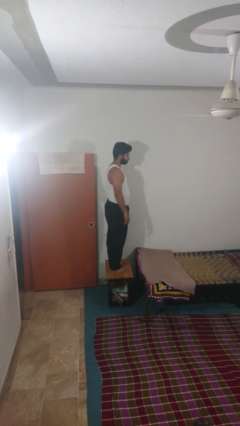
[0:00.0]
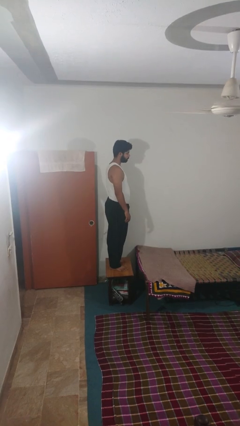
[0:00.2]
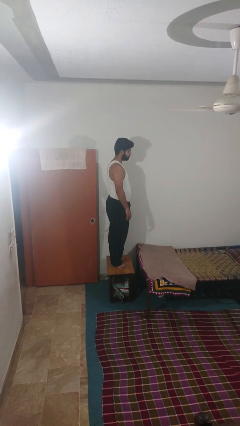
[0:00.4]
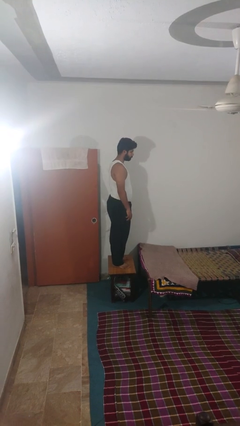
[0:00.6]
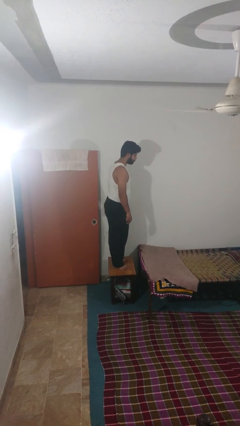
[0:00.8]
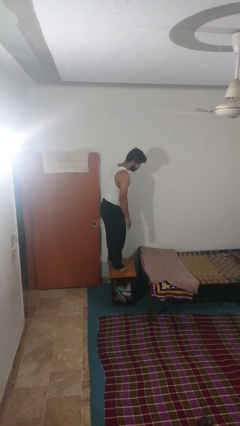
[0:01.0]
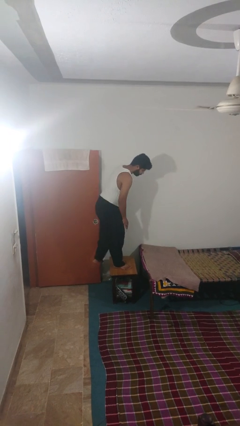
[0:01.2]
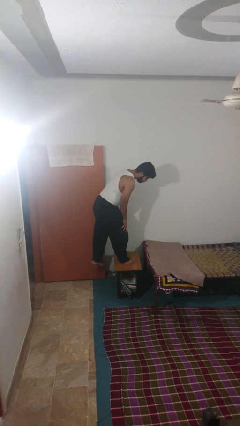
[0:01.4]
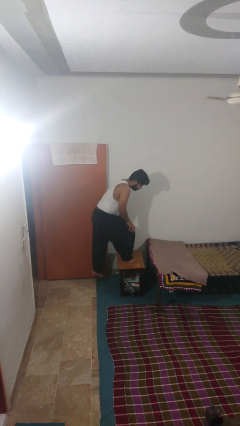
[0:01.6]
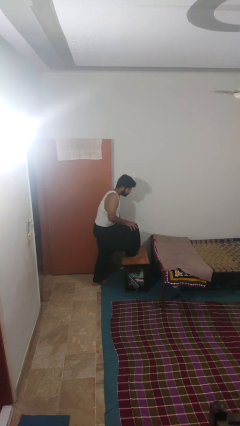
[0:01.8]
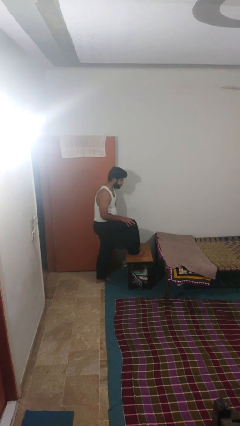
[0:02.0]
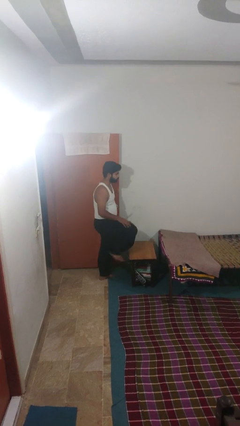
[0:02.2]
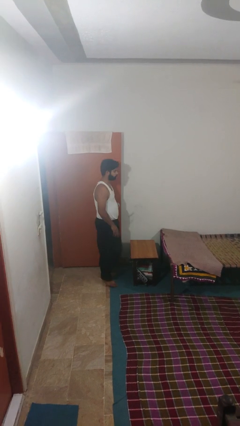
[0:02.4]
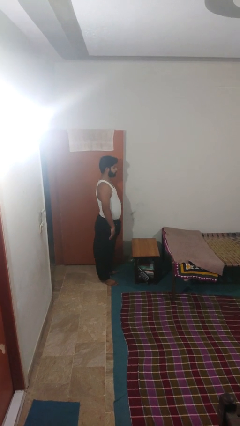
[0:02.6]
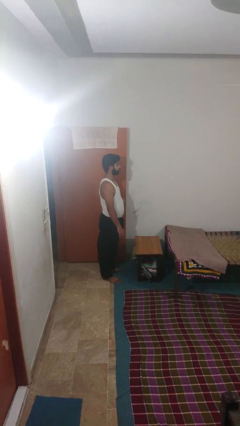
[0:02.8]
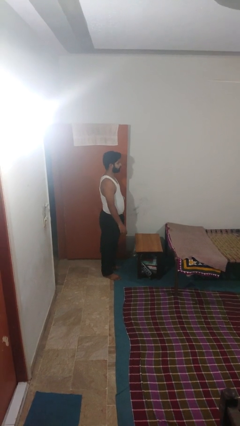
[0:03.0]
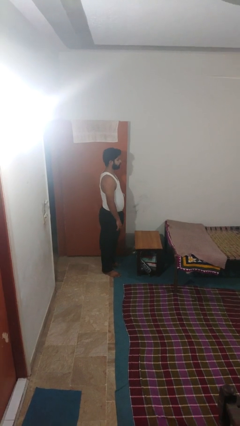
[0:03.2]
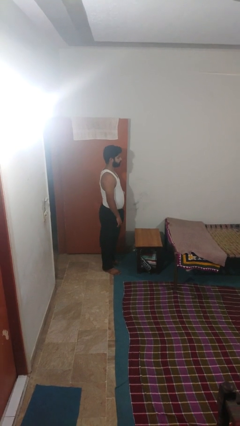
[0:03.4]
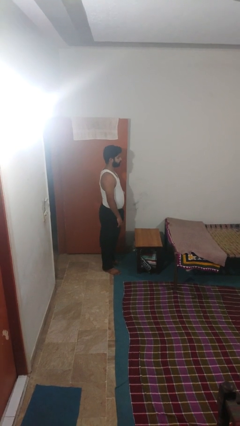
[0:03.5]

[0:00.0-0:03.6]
person climbs off table

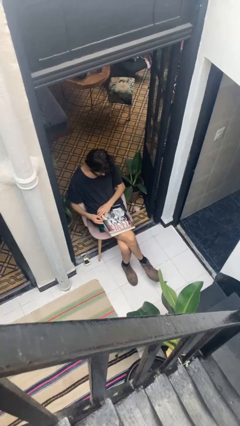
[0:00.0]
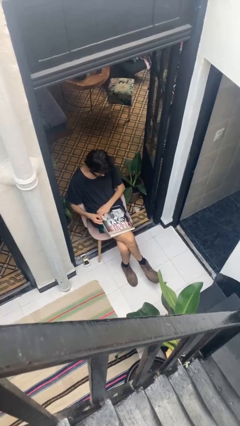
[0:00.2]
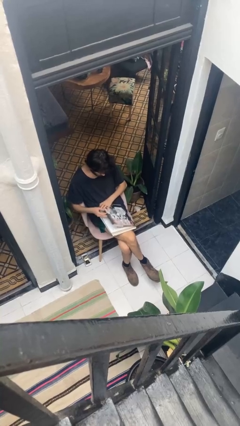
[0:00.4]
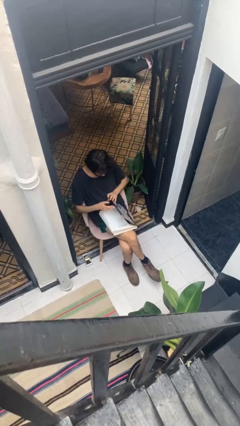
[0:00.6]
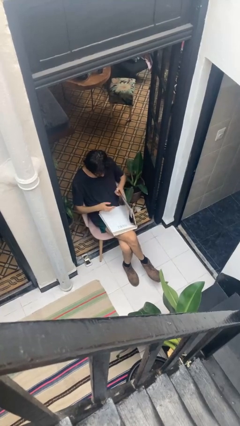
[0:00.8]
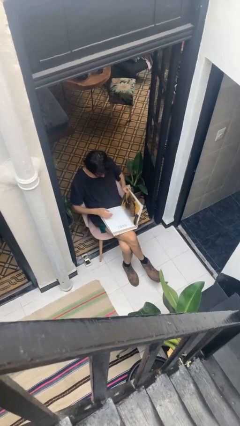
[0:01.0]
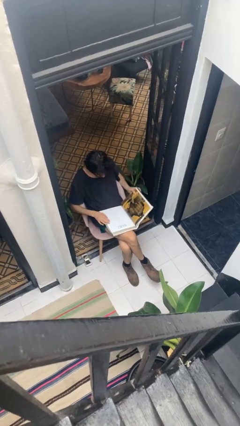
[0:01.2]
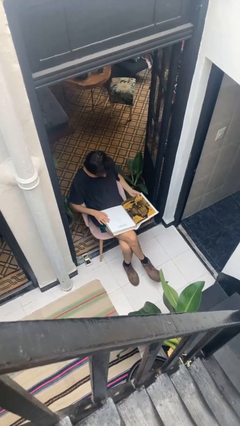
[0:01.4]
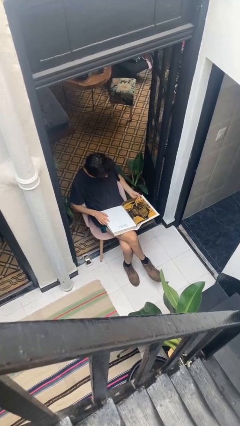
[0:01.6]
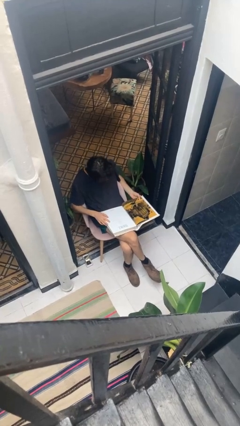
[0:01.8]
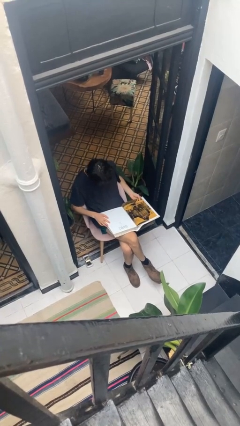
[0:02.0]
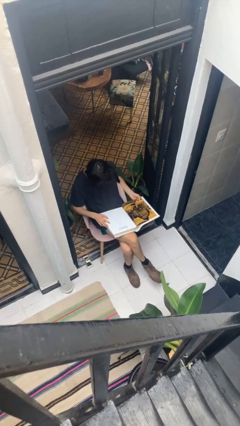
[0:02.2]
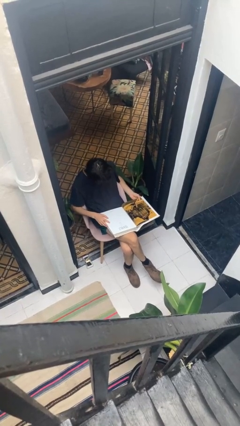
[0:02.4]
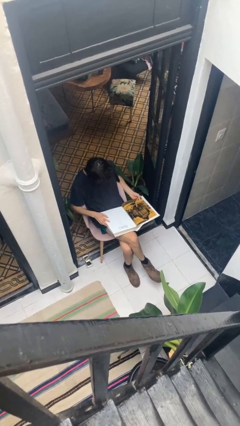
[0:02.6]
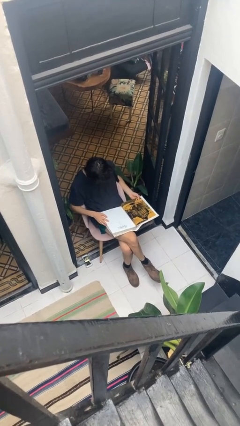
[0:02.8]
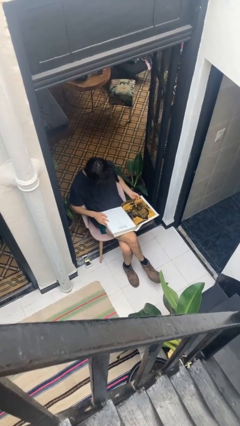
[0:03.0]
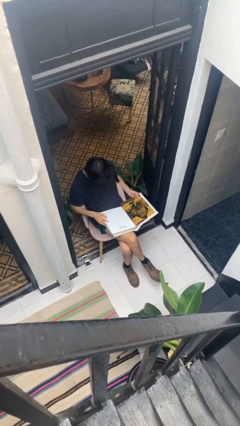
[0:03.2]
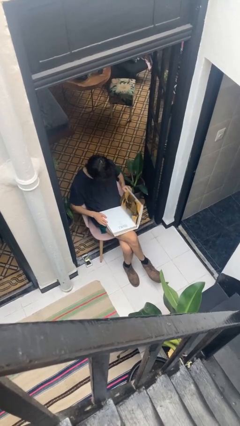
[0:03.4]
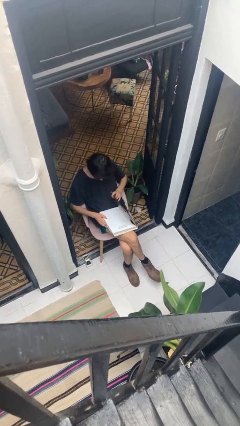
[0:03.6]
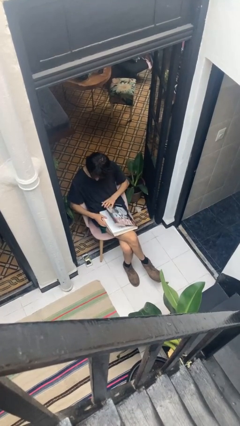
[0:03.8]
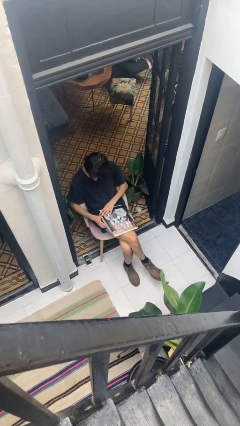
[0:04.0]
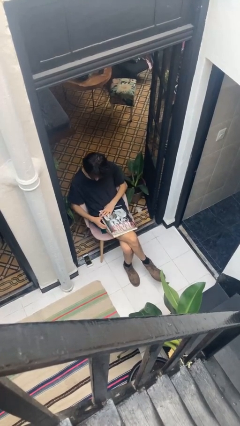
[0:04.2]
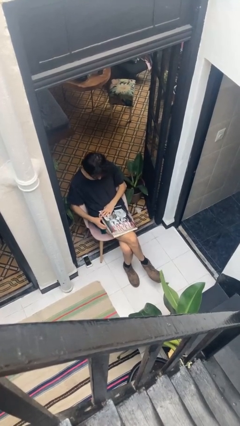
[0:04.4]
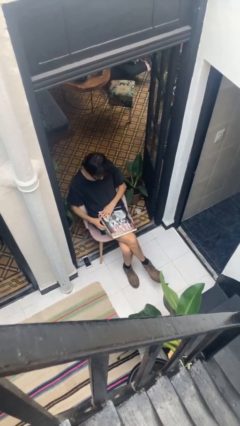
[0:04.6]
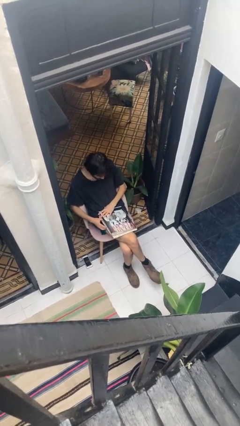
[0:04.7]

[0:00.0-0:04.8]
person reads document

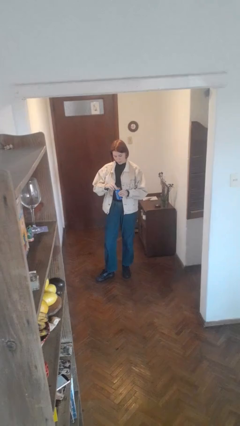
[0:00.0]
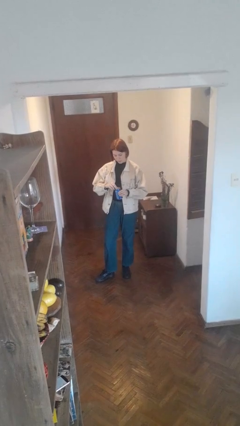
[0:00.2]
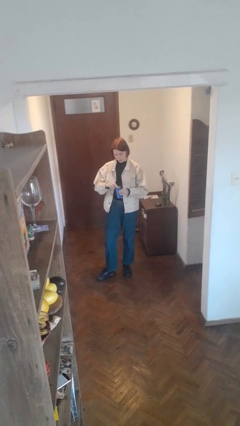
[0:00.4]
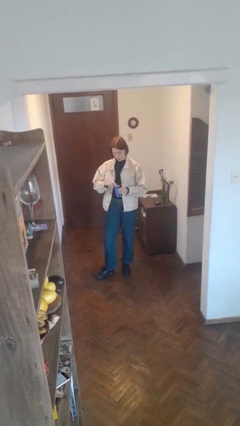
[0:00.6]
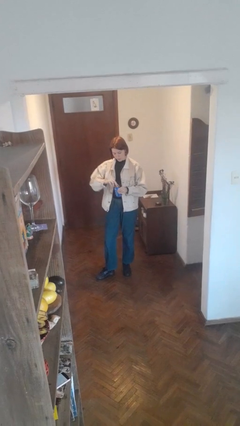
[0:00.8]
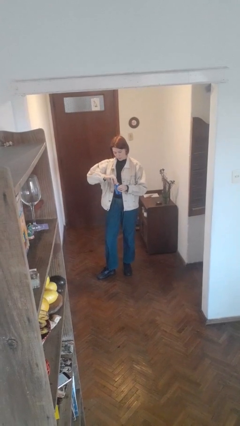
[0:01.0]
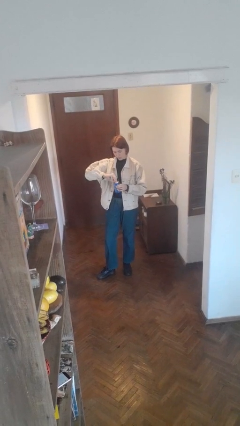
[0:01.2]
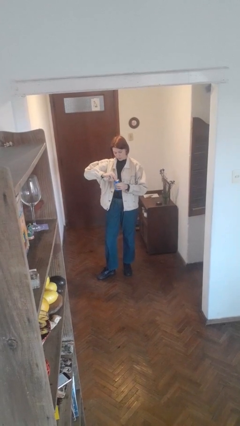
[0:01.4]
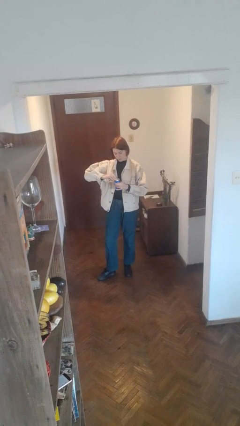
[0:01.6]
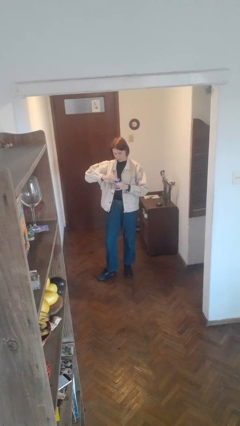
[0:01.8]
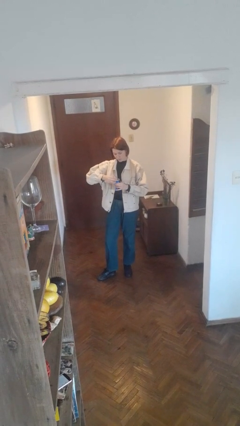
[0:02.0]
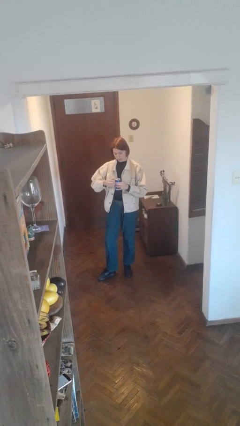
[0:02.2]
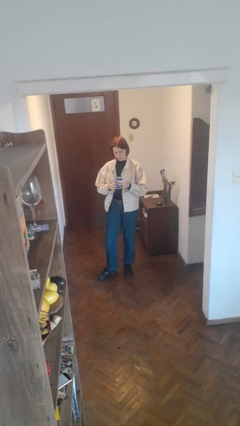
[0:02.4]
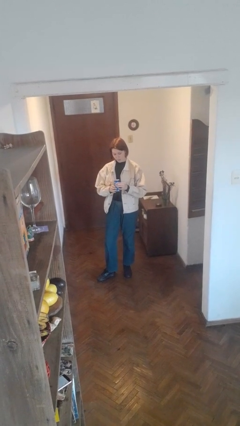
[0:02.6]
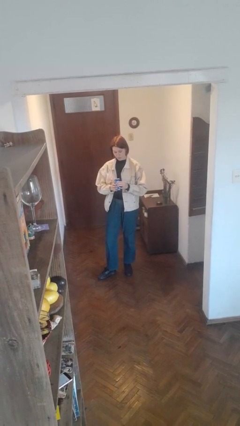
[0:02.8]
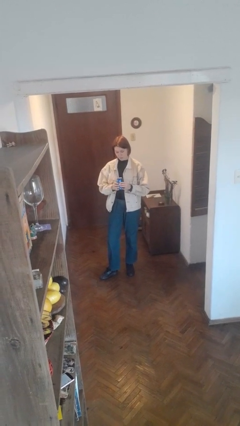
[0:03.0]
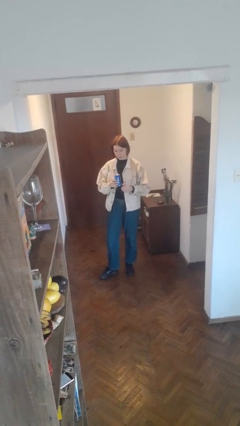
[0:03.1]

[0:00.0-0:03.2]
person opens beverage can

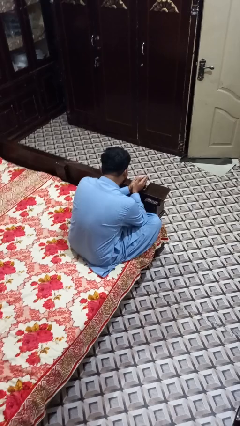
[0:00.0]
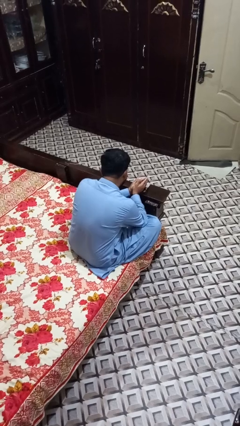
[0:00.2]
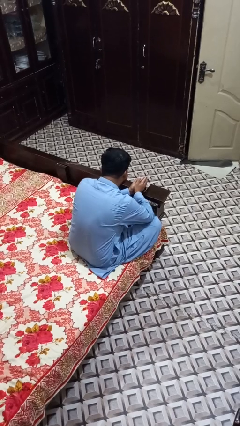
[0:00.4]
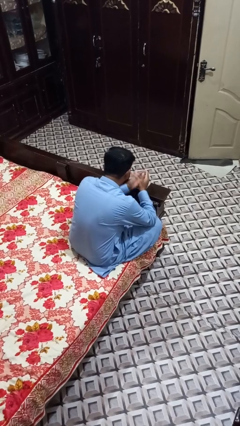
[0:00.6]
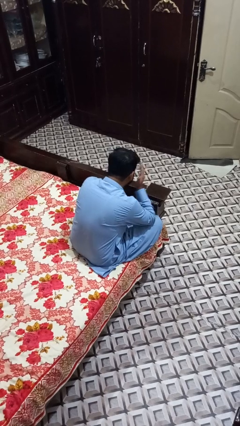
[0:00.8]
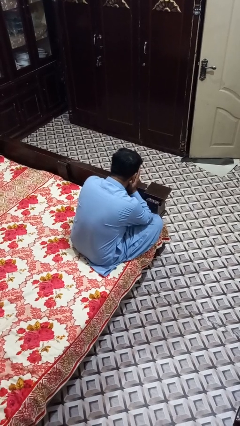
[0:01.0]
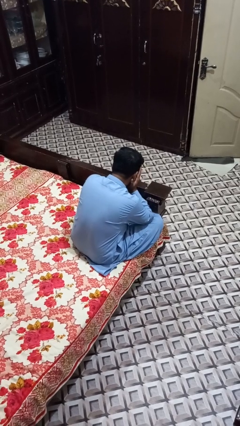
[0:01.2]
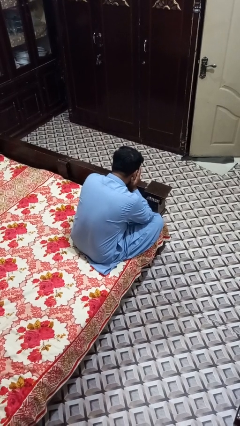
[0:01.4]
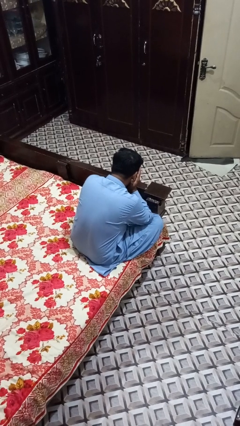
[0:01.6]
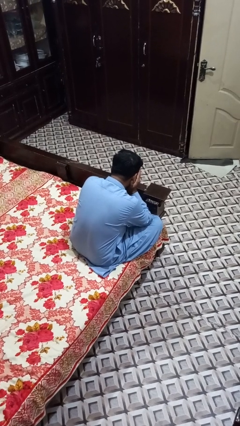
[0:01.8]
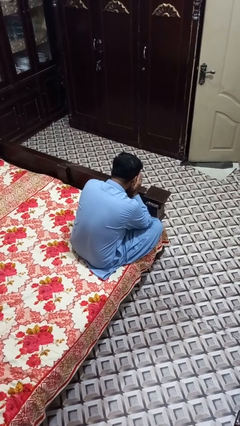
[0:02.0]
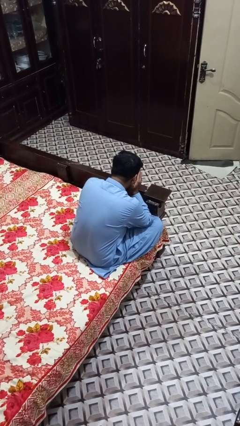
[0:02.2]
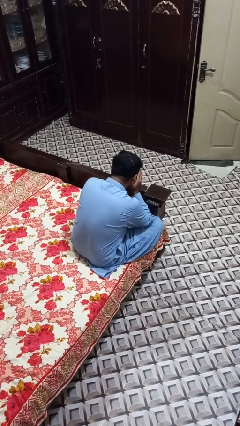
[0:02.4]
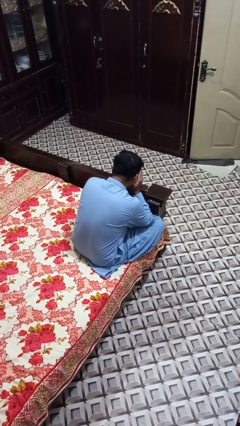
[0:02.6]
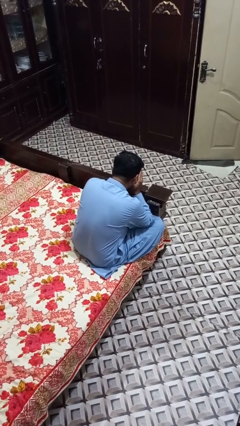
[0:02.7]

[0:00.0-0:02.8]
person covers face with hands

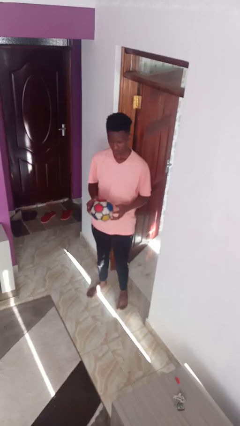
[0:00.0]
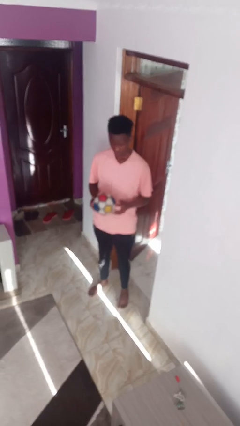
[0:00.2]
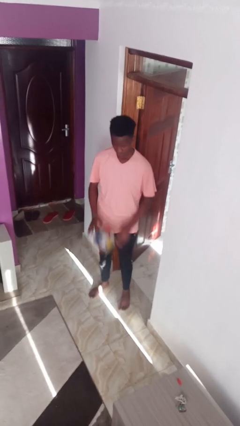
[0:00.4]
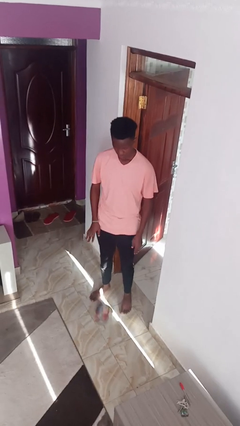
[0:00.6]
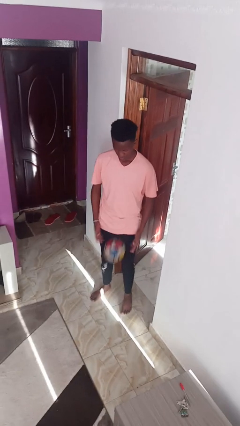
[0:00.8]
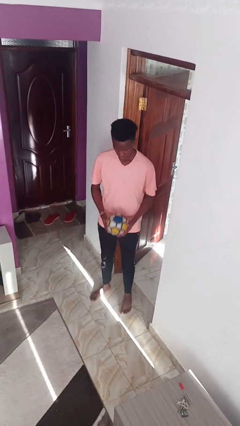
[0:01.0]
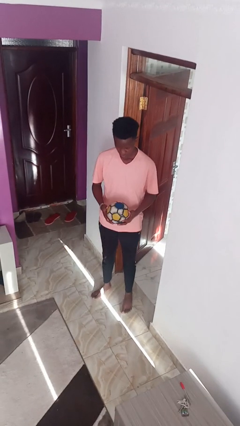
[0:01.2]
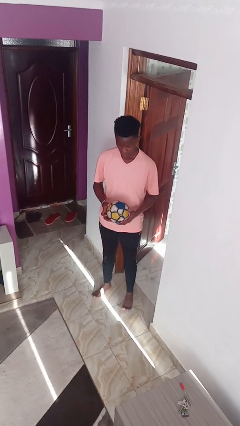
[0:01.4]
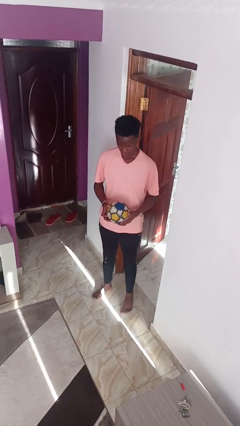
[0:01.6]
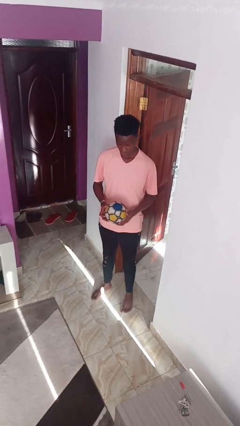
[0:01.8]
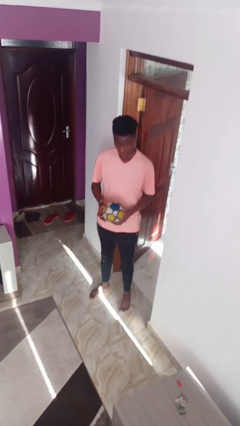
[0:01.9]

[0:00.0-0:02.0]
person bounces ball on floor

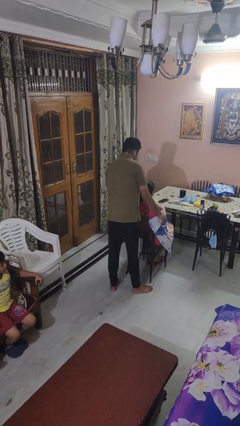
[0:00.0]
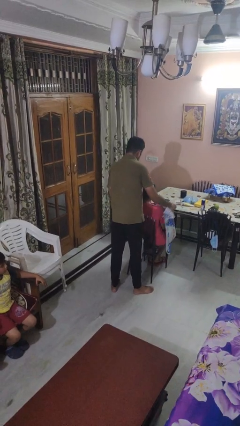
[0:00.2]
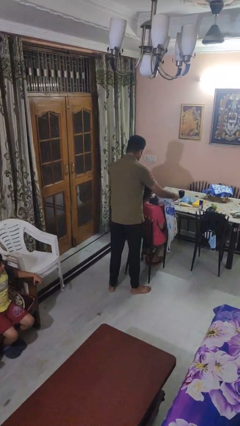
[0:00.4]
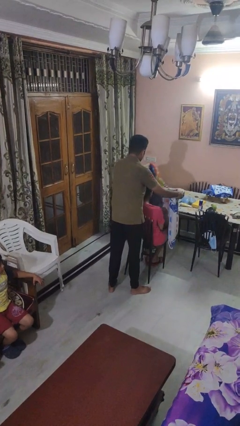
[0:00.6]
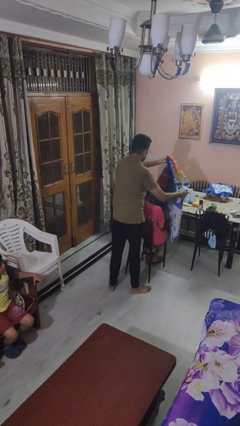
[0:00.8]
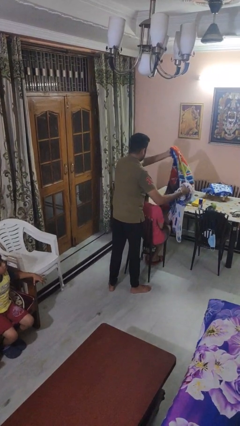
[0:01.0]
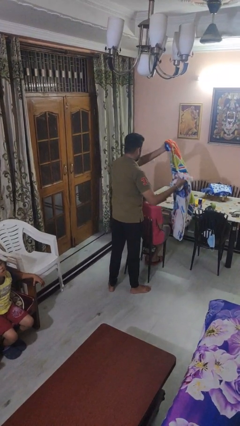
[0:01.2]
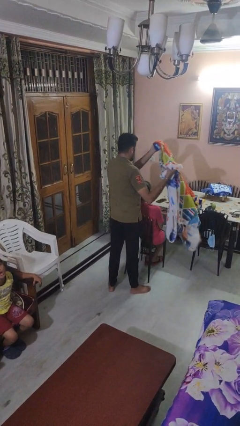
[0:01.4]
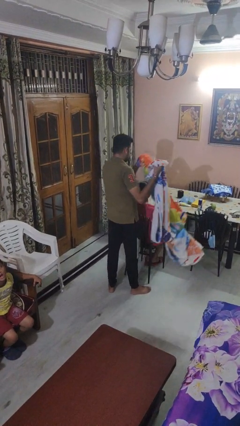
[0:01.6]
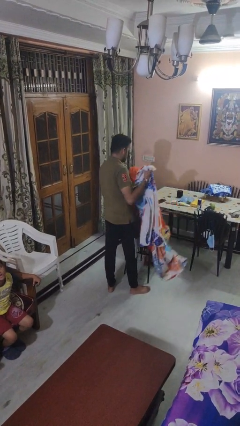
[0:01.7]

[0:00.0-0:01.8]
person uncovers friend with blanket
